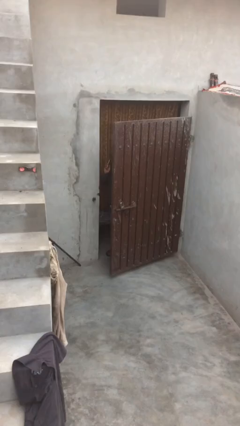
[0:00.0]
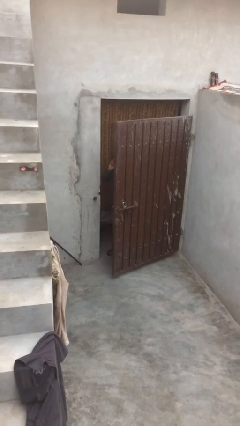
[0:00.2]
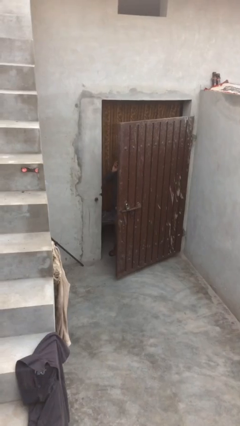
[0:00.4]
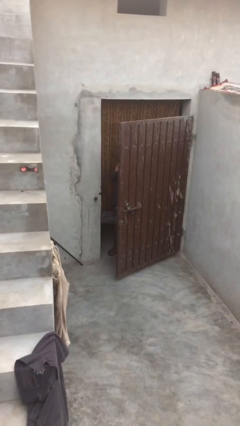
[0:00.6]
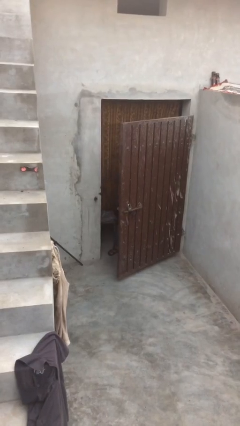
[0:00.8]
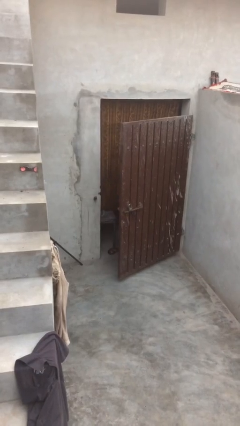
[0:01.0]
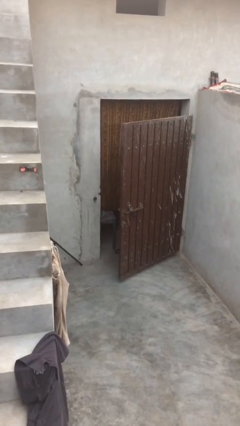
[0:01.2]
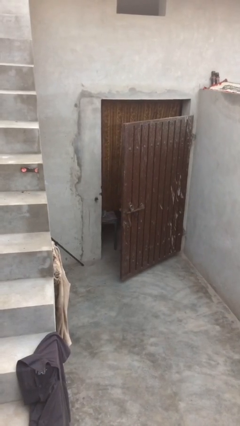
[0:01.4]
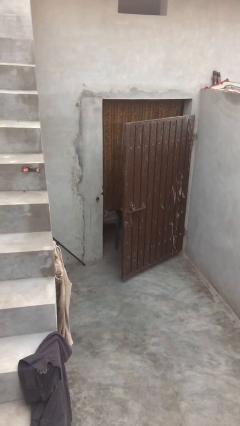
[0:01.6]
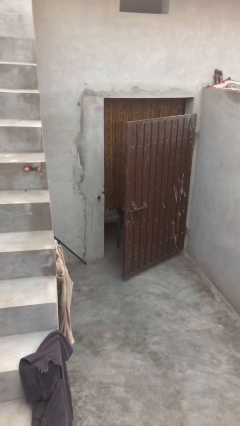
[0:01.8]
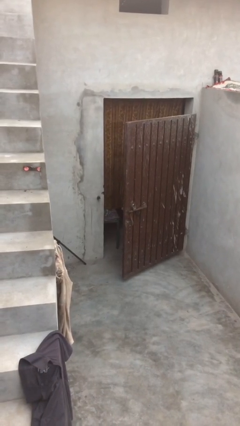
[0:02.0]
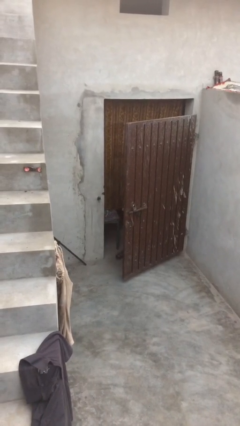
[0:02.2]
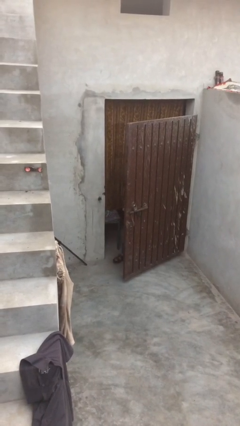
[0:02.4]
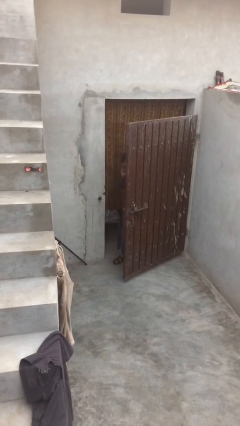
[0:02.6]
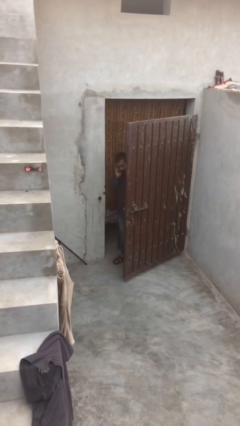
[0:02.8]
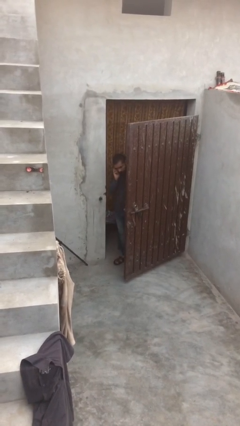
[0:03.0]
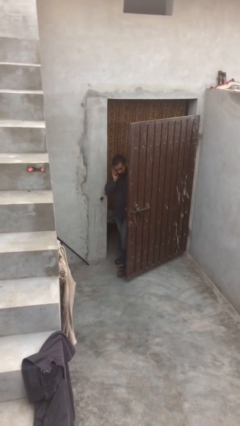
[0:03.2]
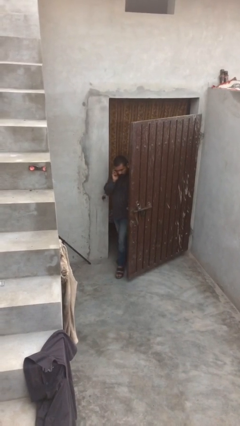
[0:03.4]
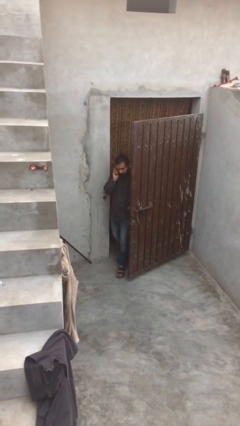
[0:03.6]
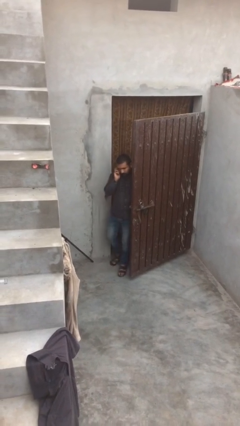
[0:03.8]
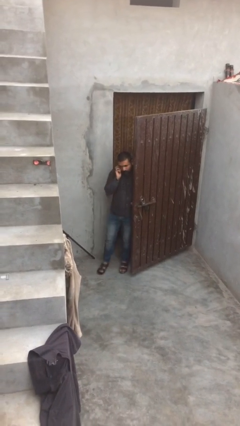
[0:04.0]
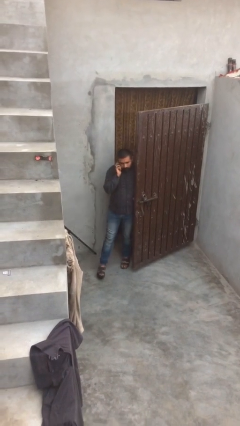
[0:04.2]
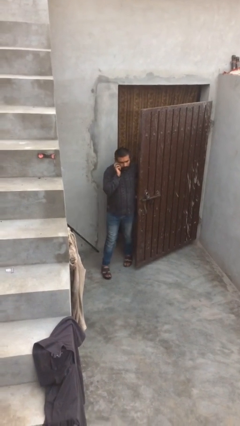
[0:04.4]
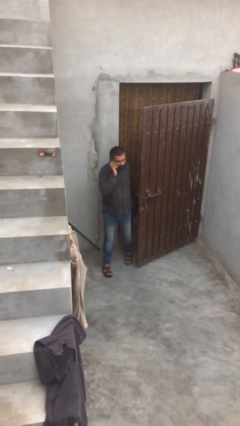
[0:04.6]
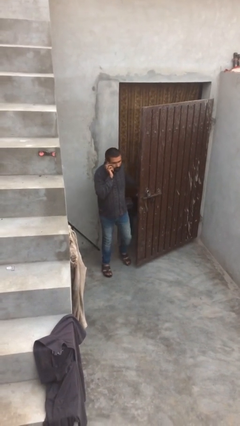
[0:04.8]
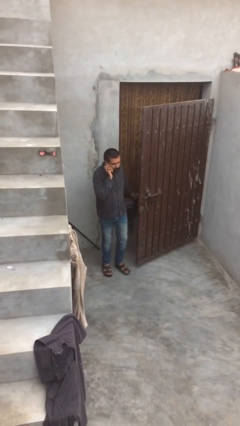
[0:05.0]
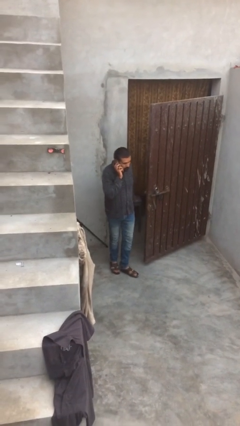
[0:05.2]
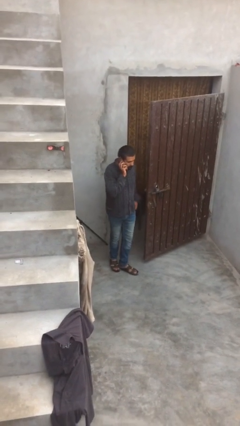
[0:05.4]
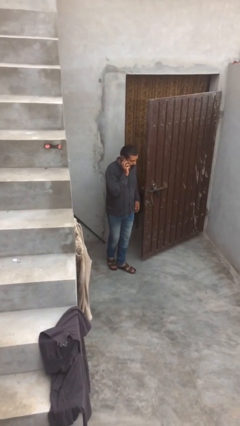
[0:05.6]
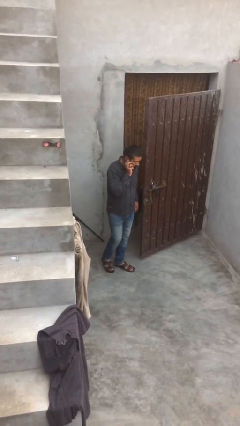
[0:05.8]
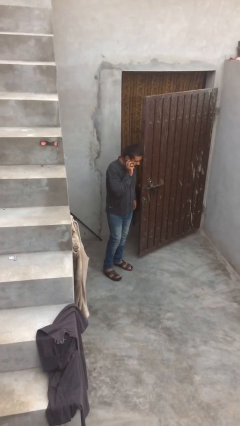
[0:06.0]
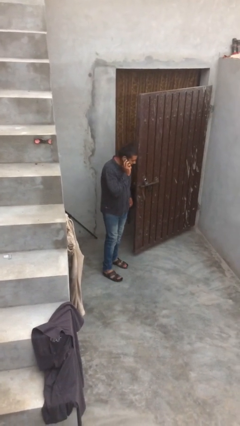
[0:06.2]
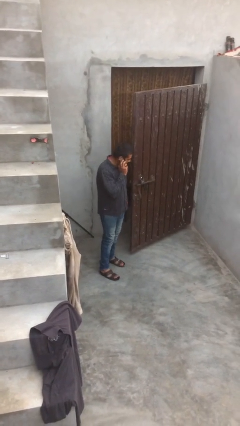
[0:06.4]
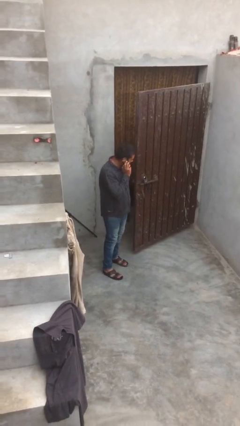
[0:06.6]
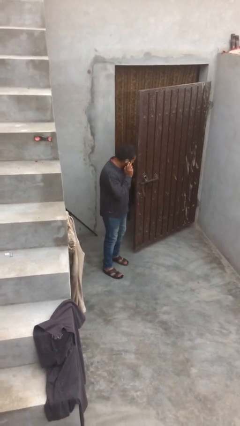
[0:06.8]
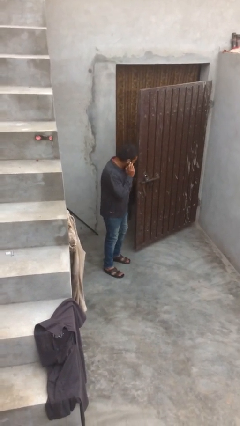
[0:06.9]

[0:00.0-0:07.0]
person enters scene through structure

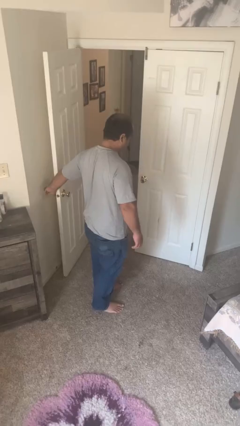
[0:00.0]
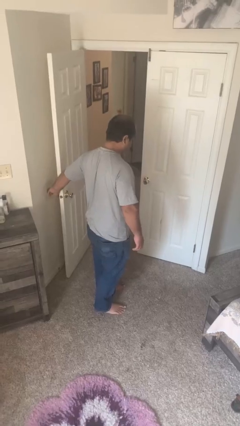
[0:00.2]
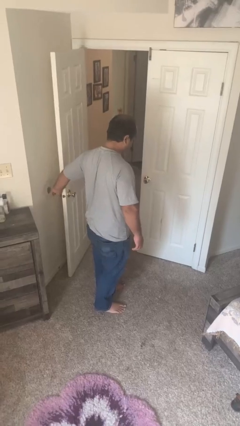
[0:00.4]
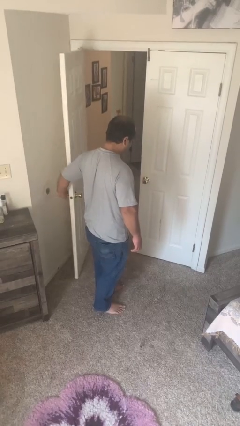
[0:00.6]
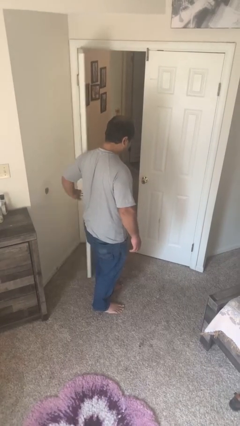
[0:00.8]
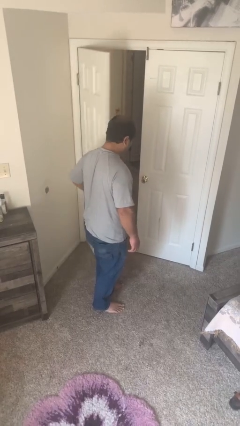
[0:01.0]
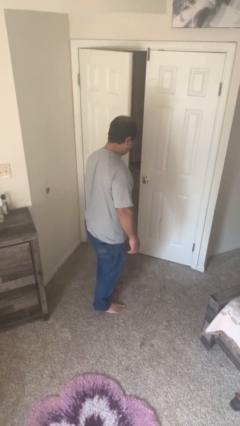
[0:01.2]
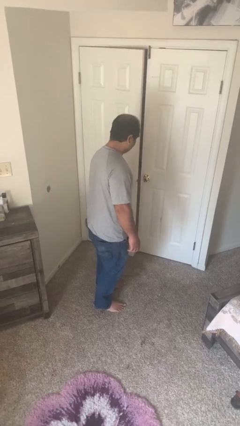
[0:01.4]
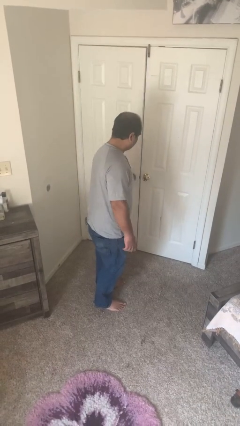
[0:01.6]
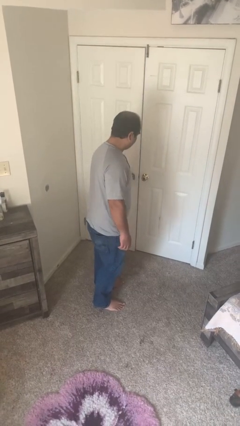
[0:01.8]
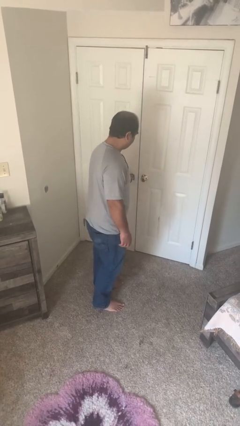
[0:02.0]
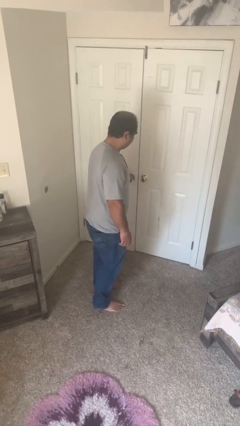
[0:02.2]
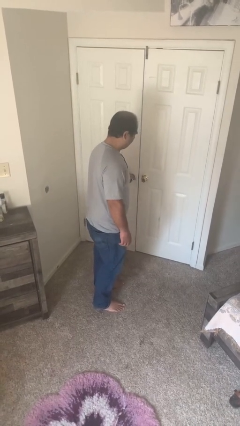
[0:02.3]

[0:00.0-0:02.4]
person closes facility door

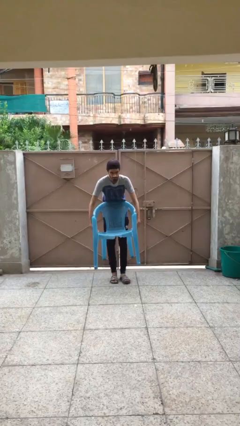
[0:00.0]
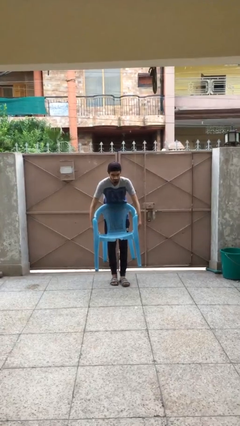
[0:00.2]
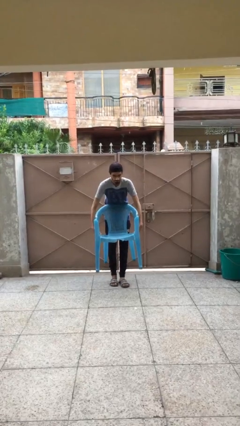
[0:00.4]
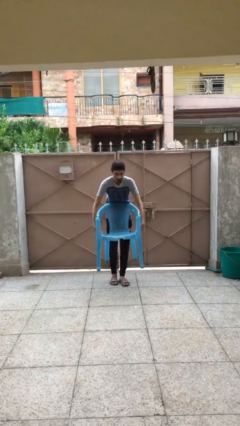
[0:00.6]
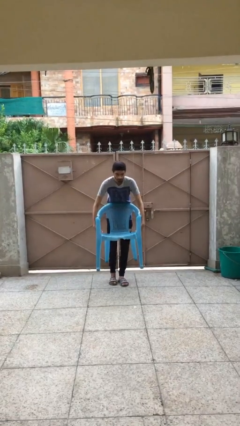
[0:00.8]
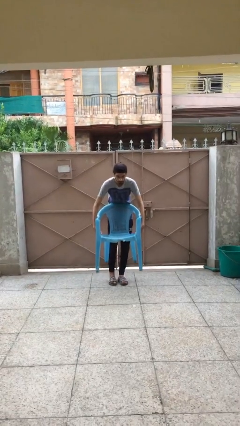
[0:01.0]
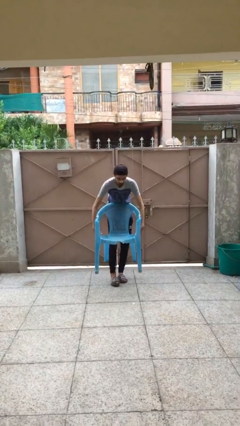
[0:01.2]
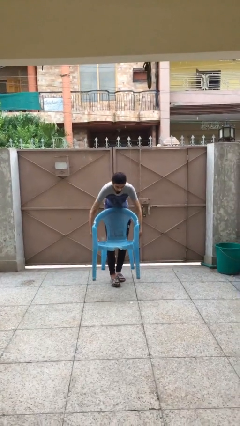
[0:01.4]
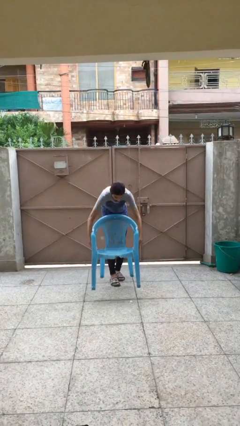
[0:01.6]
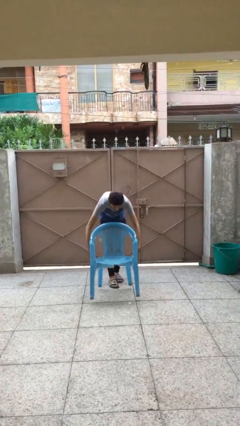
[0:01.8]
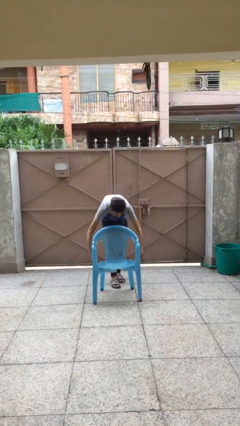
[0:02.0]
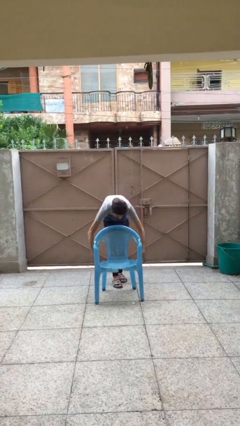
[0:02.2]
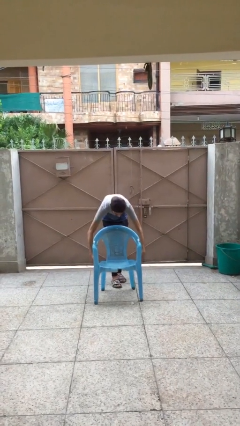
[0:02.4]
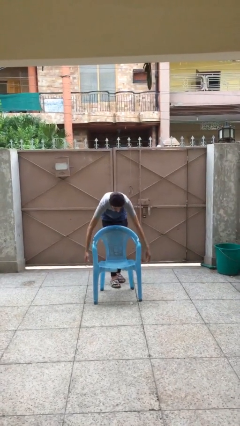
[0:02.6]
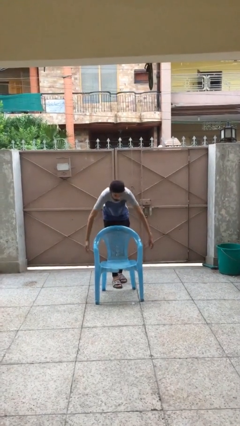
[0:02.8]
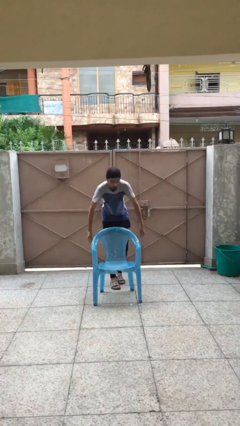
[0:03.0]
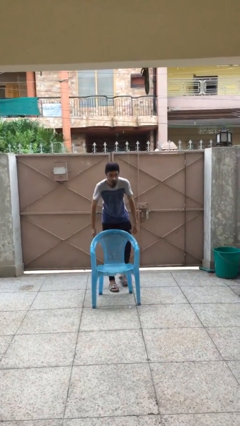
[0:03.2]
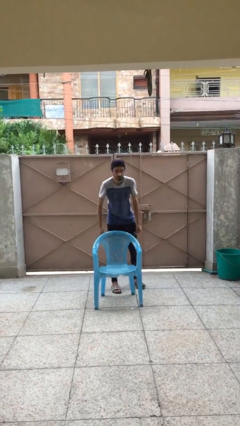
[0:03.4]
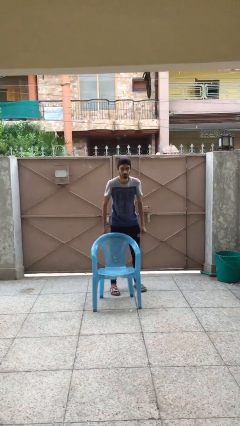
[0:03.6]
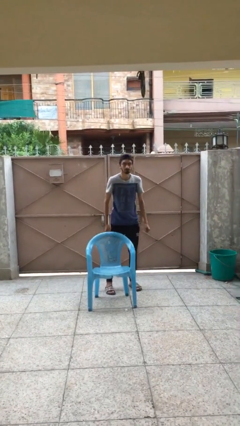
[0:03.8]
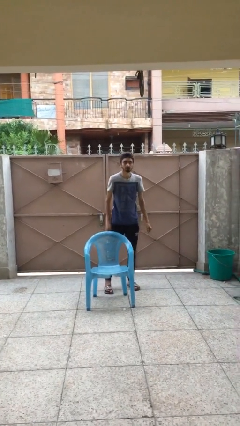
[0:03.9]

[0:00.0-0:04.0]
person puts down object on floor

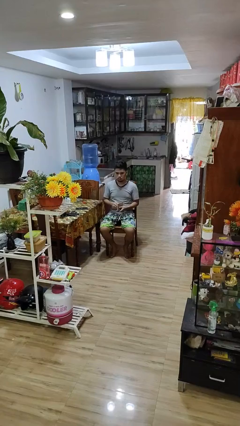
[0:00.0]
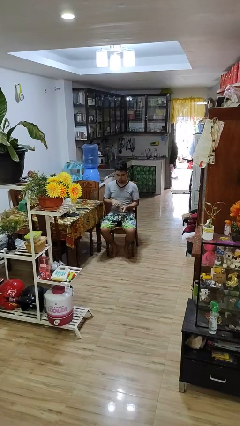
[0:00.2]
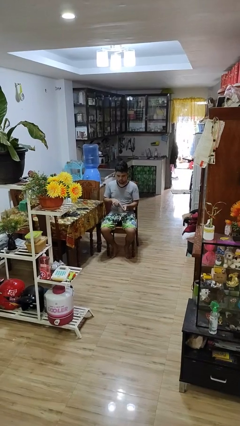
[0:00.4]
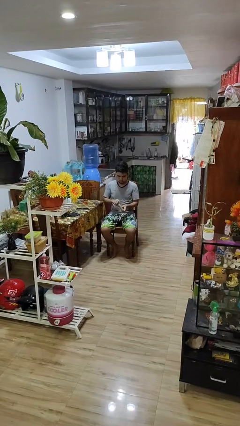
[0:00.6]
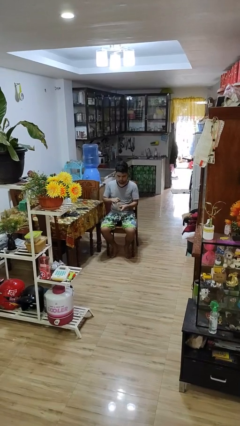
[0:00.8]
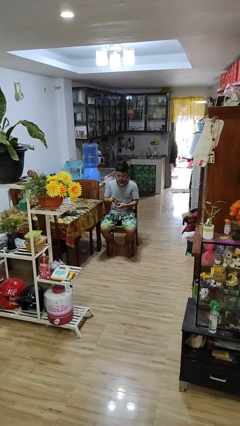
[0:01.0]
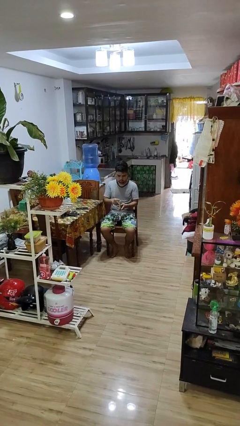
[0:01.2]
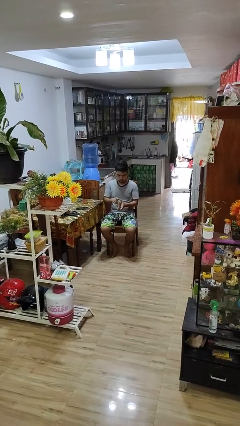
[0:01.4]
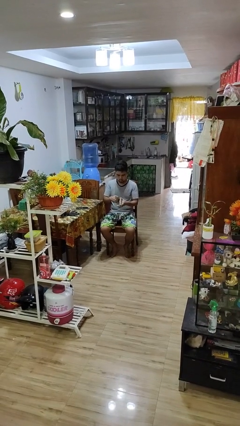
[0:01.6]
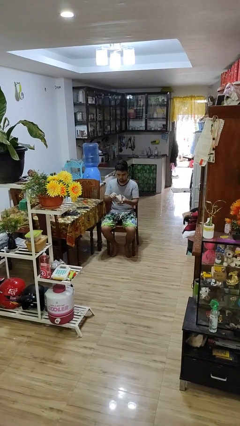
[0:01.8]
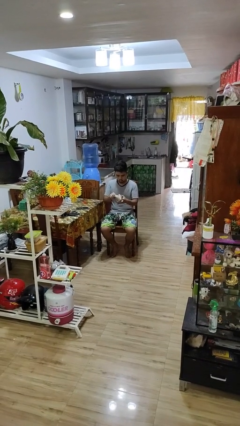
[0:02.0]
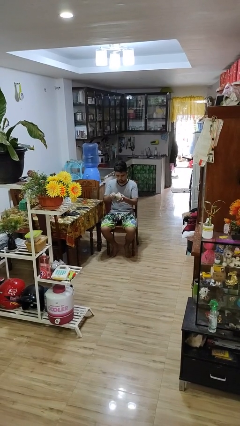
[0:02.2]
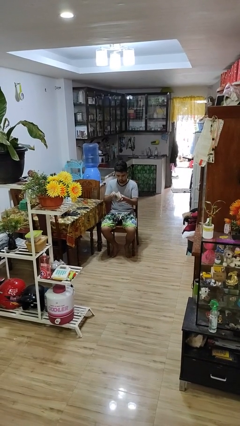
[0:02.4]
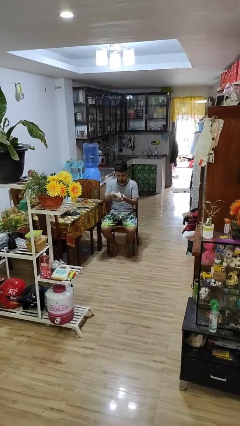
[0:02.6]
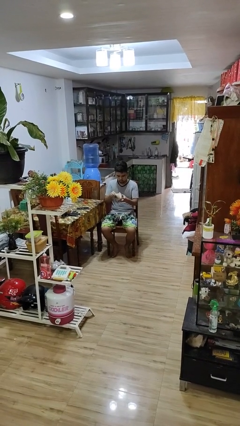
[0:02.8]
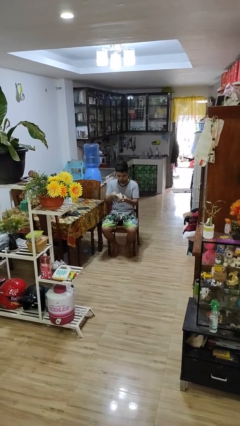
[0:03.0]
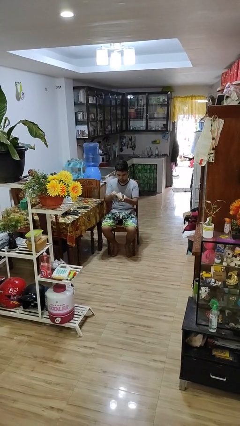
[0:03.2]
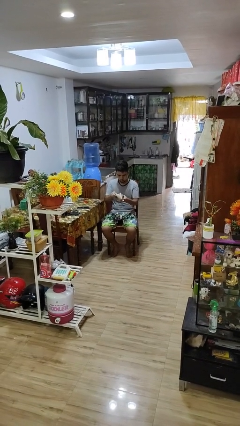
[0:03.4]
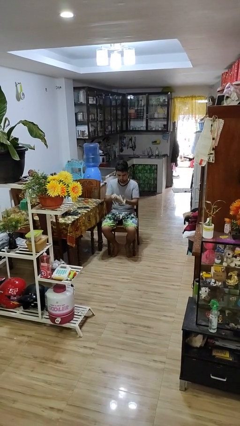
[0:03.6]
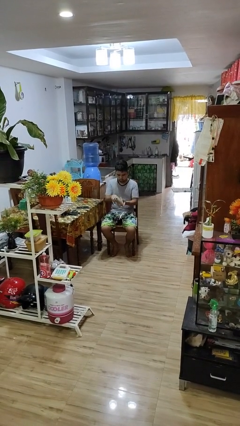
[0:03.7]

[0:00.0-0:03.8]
person searches in purse

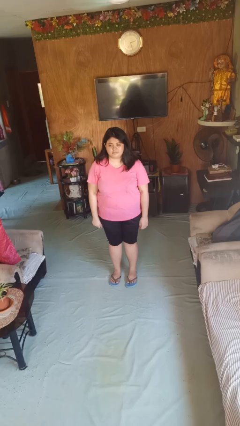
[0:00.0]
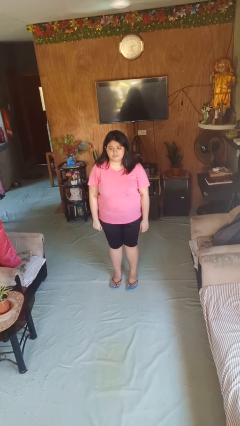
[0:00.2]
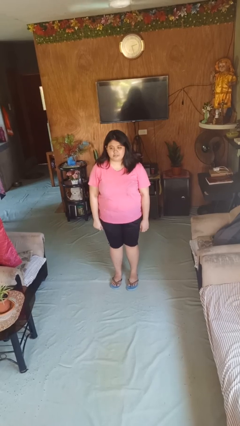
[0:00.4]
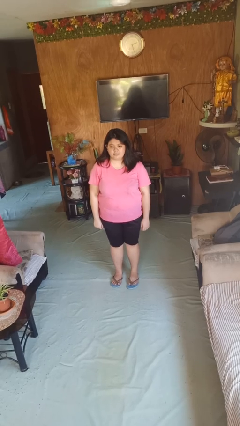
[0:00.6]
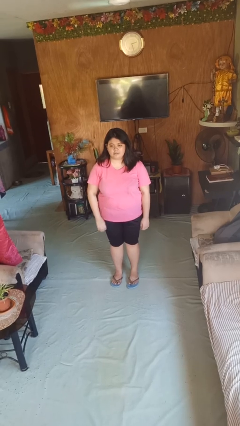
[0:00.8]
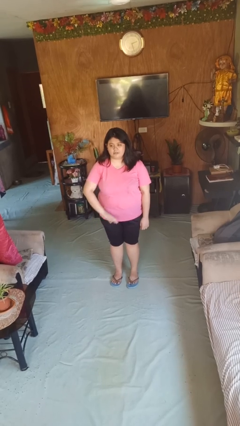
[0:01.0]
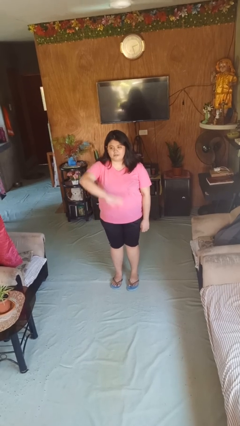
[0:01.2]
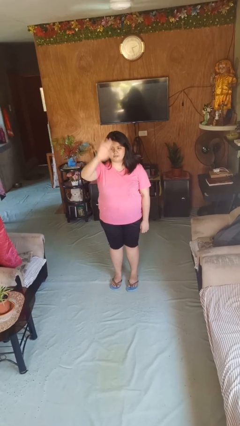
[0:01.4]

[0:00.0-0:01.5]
person gestures swipe up
